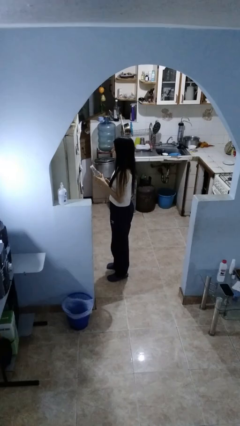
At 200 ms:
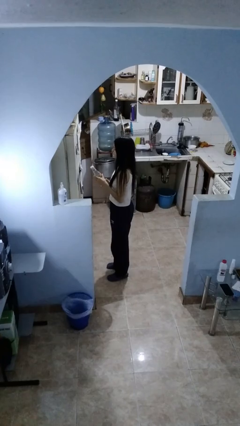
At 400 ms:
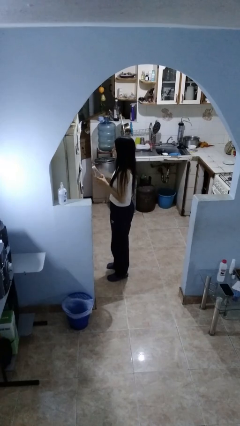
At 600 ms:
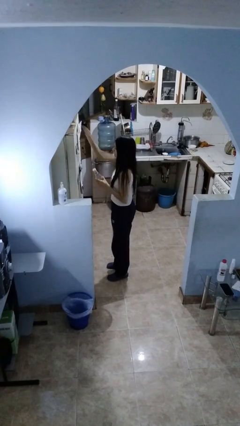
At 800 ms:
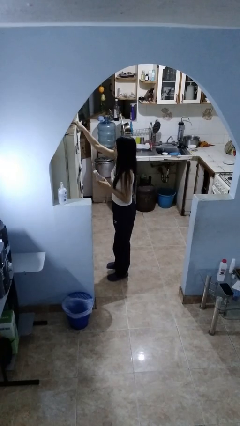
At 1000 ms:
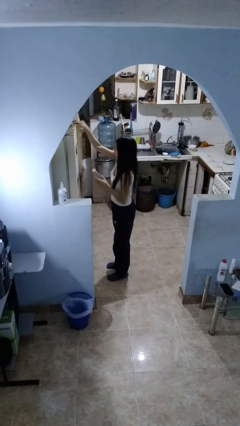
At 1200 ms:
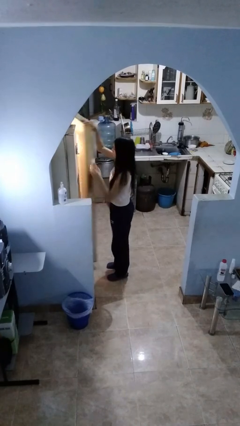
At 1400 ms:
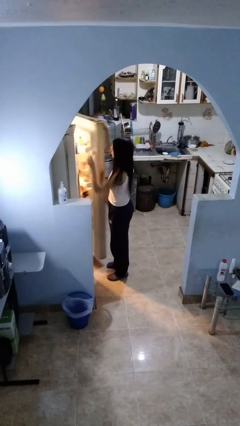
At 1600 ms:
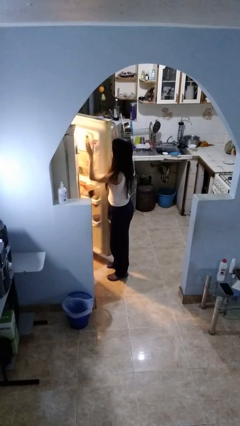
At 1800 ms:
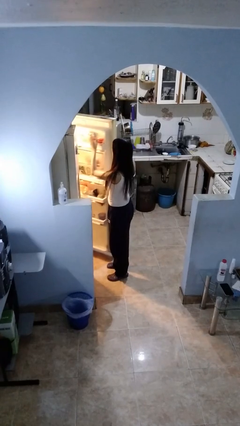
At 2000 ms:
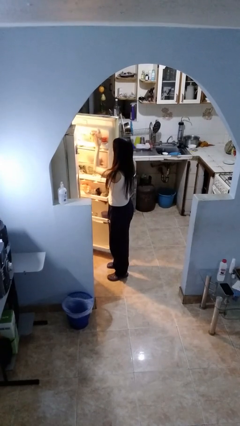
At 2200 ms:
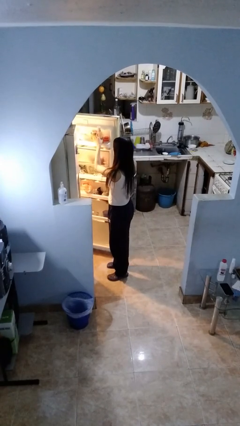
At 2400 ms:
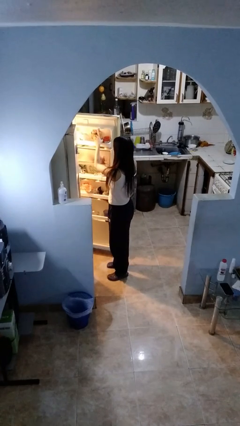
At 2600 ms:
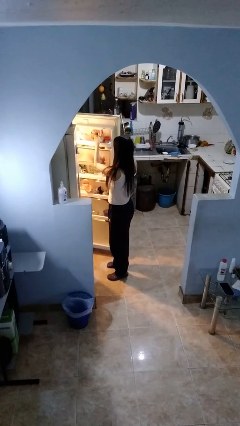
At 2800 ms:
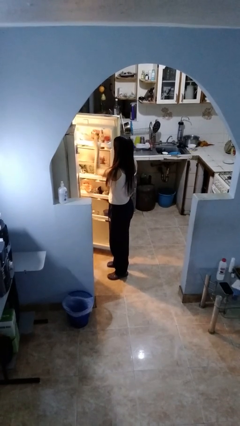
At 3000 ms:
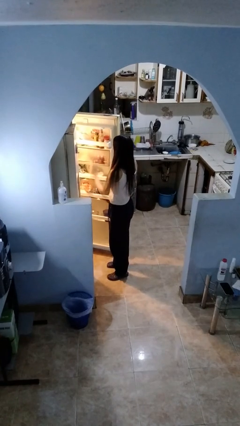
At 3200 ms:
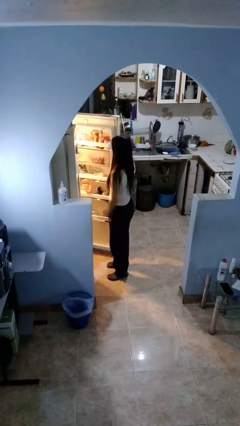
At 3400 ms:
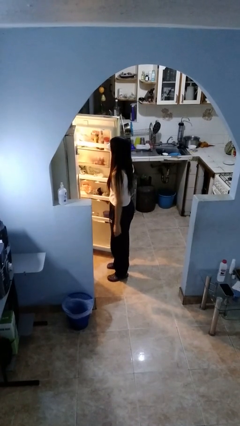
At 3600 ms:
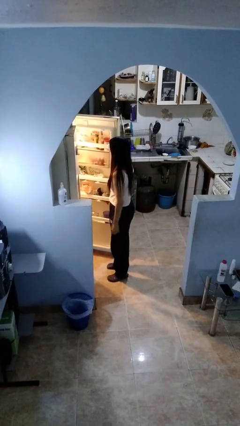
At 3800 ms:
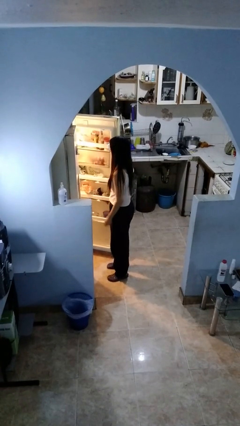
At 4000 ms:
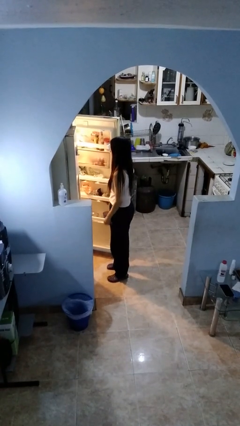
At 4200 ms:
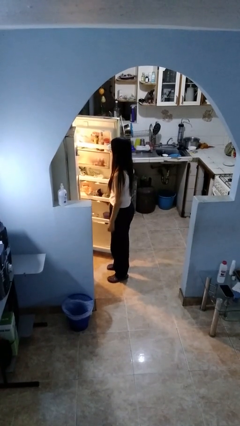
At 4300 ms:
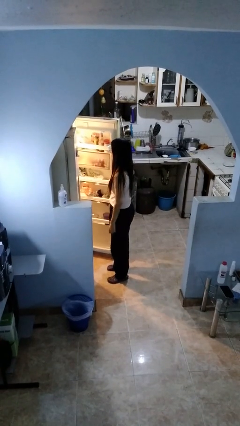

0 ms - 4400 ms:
person puts object into refrigerator

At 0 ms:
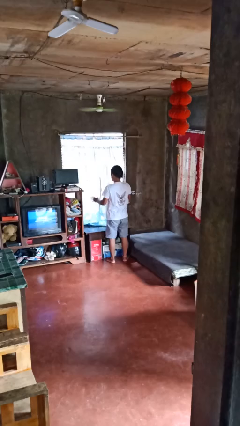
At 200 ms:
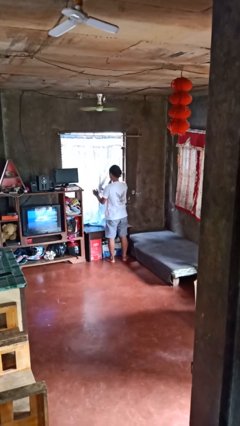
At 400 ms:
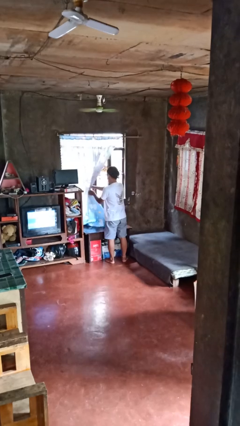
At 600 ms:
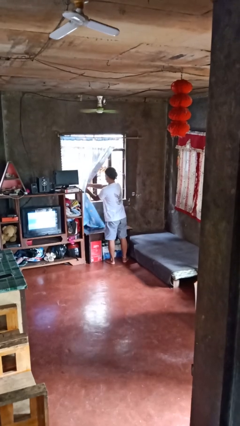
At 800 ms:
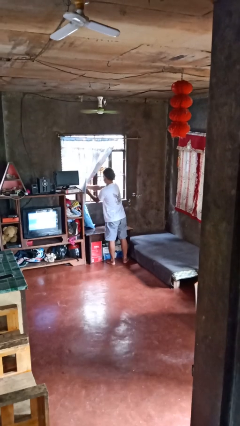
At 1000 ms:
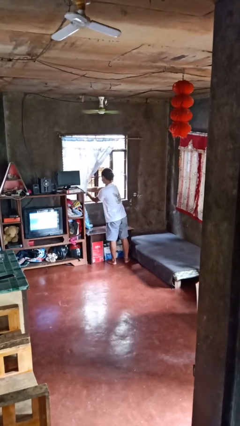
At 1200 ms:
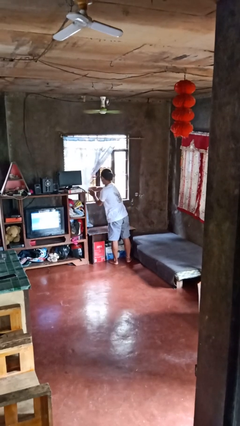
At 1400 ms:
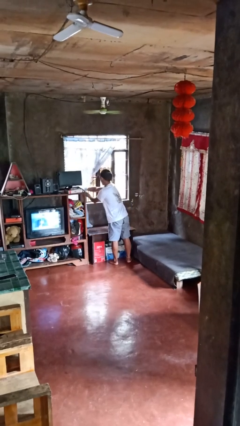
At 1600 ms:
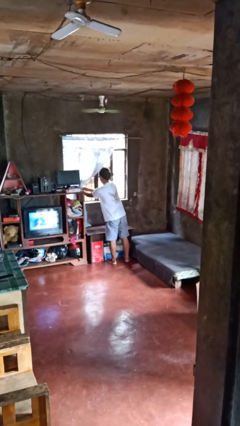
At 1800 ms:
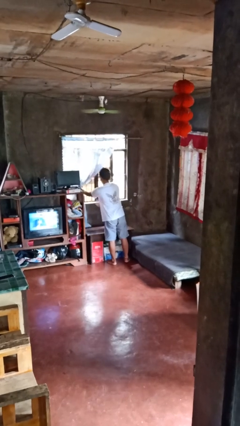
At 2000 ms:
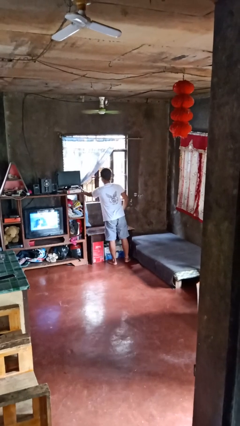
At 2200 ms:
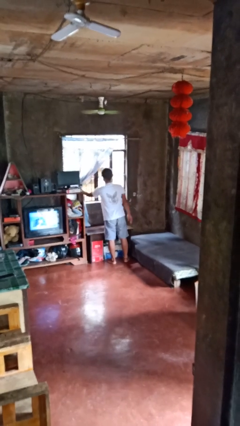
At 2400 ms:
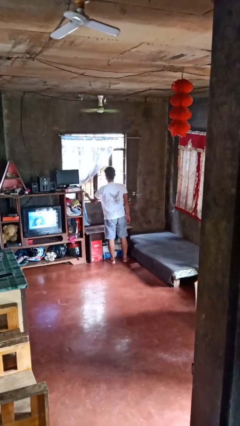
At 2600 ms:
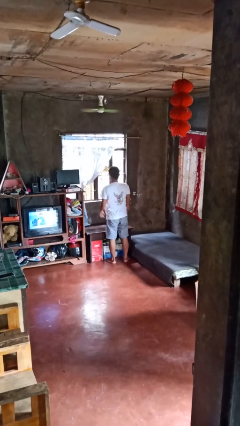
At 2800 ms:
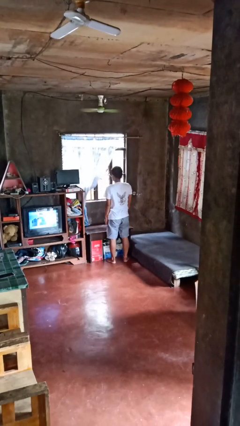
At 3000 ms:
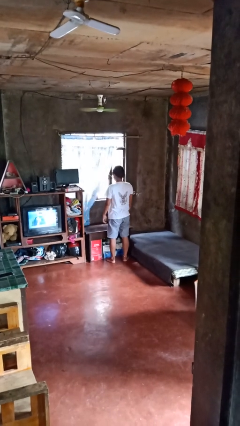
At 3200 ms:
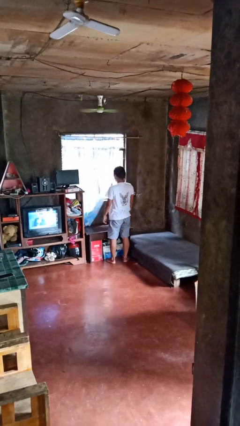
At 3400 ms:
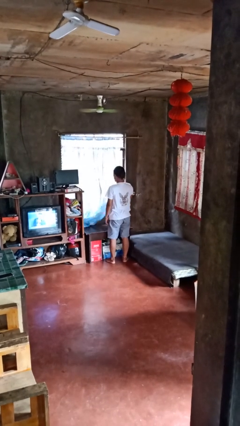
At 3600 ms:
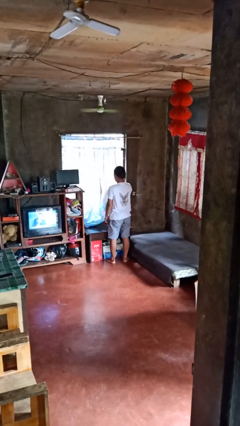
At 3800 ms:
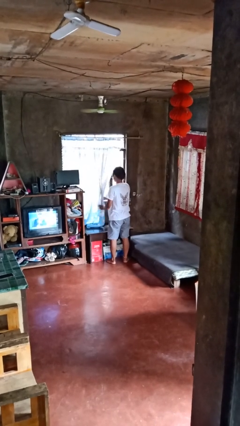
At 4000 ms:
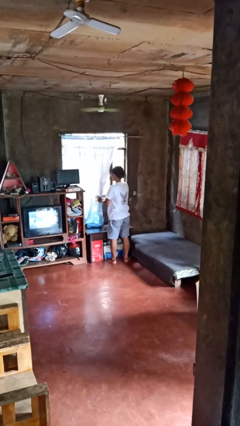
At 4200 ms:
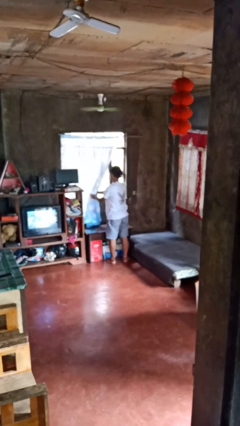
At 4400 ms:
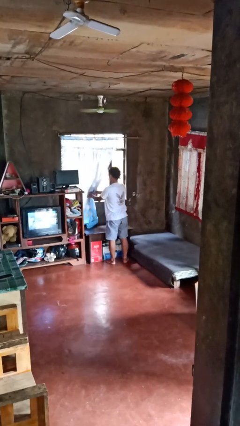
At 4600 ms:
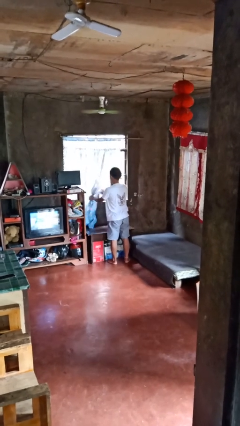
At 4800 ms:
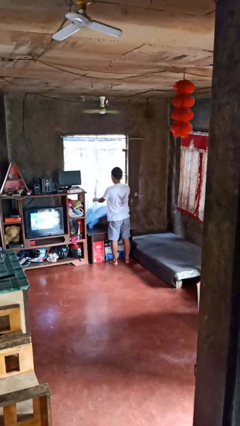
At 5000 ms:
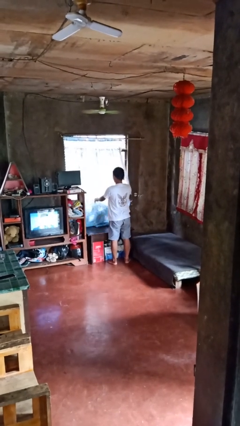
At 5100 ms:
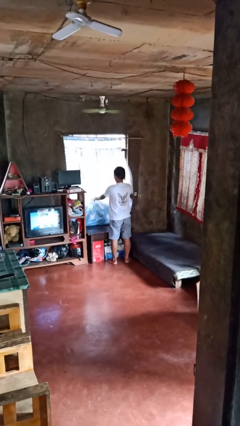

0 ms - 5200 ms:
person opens curtains

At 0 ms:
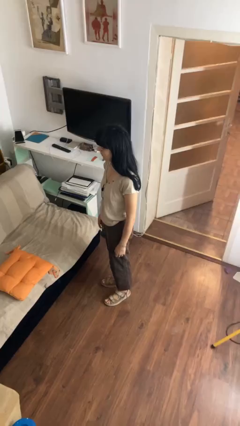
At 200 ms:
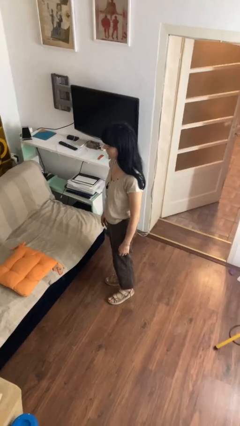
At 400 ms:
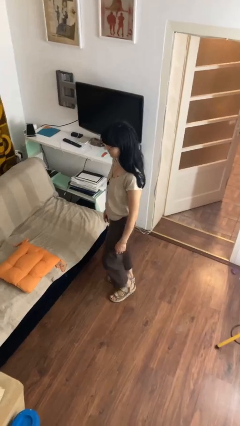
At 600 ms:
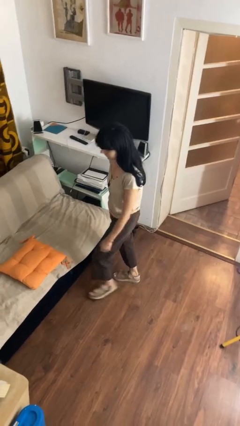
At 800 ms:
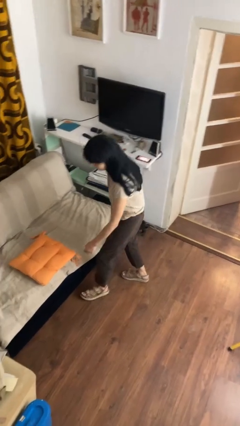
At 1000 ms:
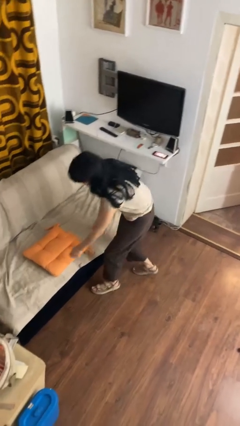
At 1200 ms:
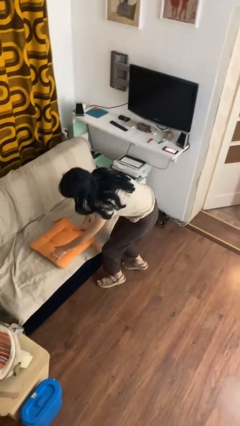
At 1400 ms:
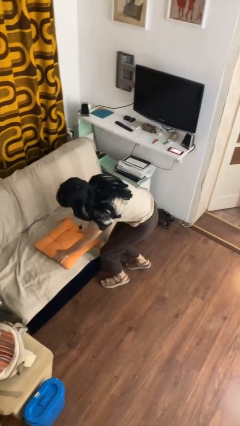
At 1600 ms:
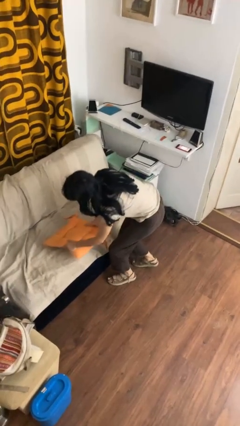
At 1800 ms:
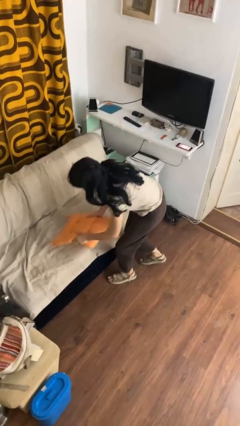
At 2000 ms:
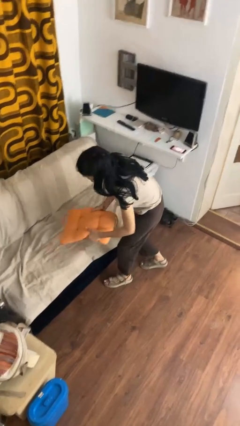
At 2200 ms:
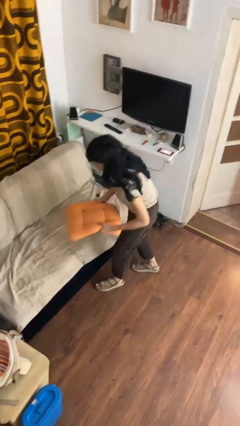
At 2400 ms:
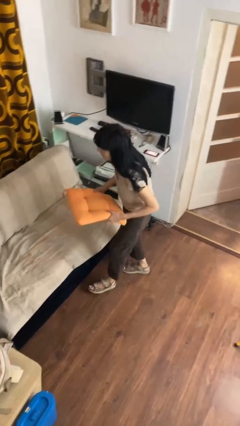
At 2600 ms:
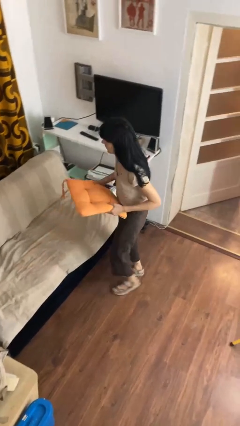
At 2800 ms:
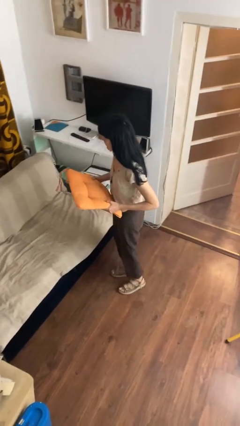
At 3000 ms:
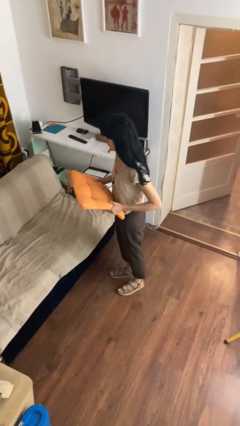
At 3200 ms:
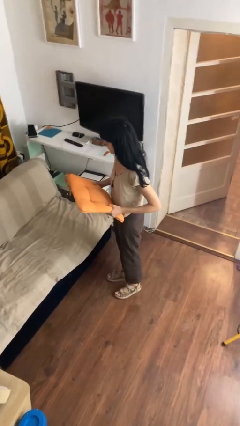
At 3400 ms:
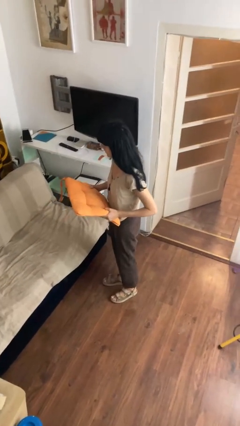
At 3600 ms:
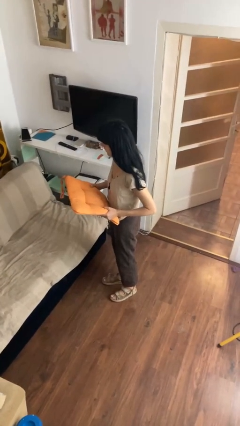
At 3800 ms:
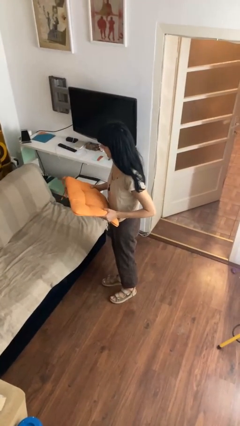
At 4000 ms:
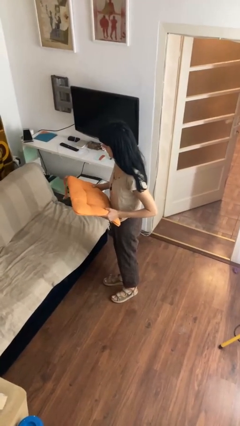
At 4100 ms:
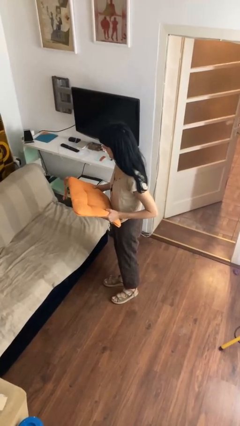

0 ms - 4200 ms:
person picks up object from couch

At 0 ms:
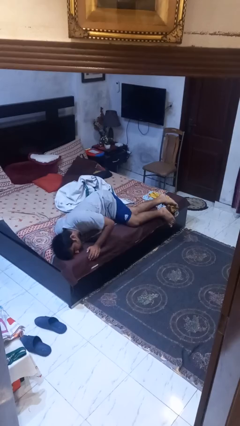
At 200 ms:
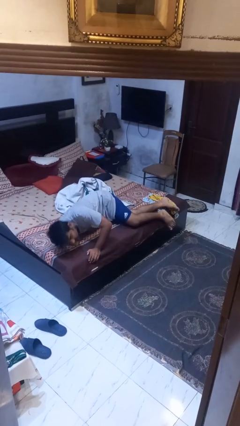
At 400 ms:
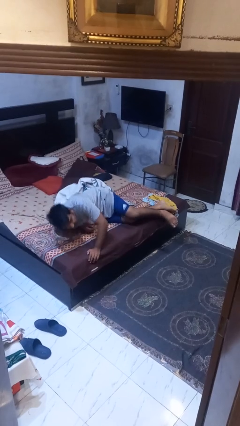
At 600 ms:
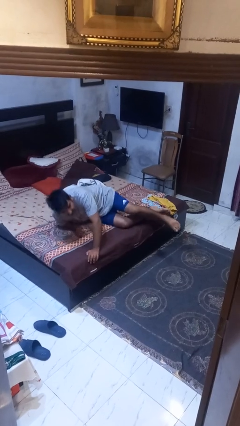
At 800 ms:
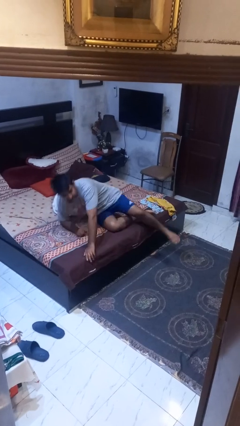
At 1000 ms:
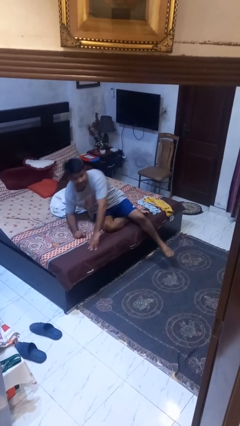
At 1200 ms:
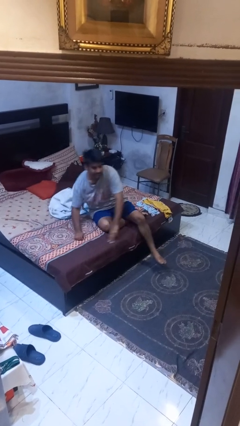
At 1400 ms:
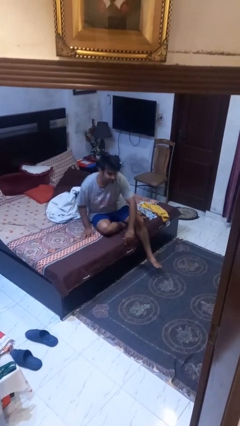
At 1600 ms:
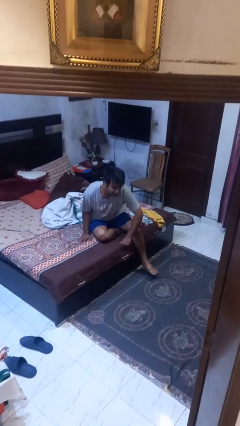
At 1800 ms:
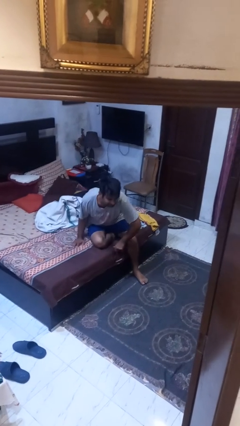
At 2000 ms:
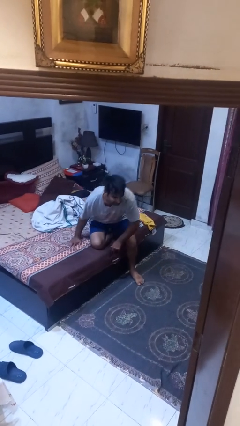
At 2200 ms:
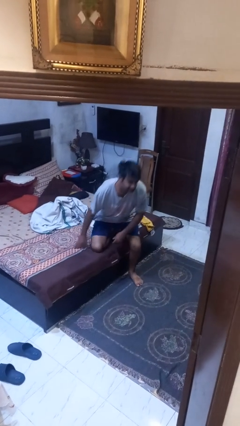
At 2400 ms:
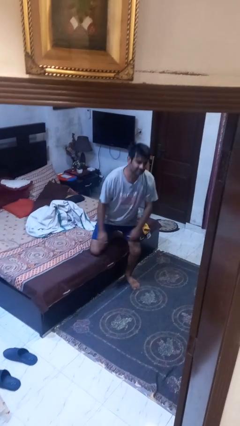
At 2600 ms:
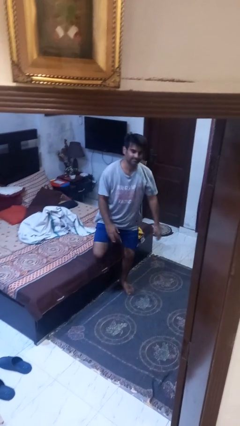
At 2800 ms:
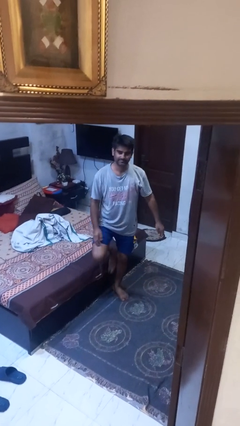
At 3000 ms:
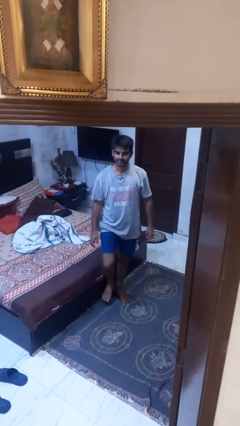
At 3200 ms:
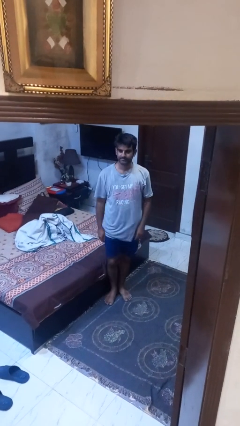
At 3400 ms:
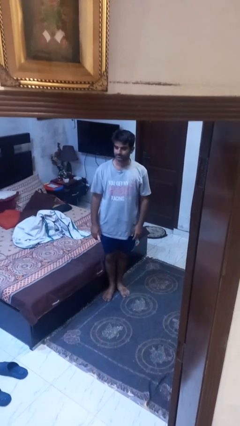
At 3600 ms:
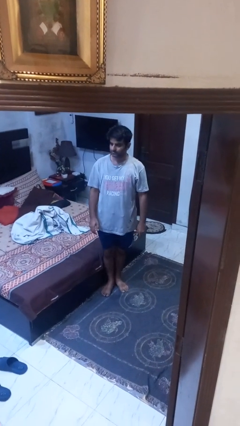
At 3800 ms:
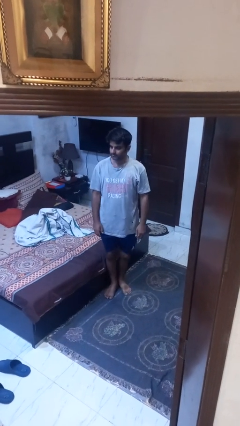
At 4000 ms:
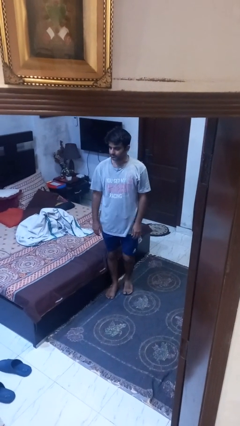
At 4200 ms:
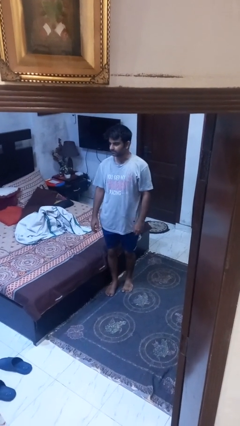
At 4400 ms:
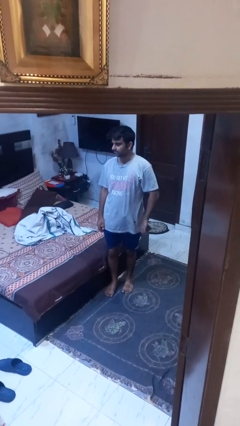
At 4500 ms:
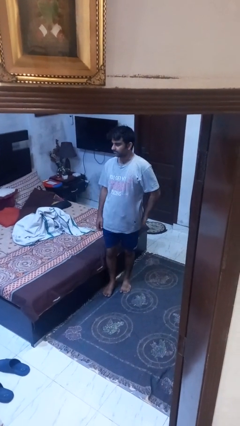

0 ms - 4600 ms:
person stands up
